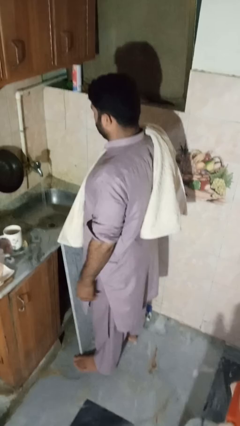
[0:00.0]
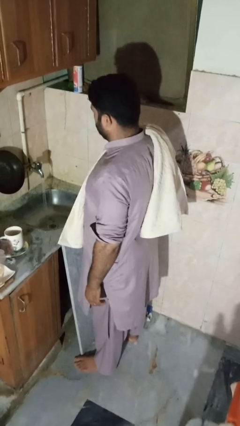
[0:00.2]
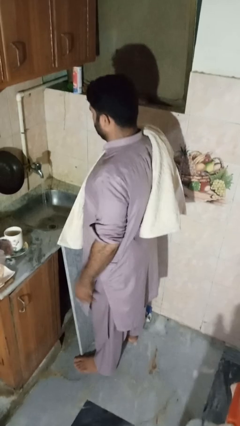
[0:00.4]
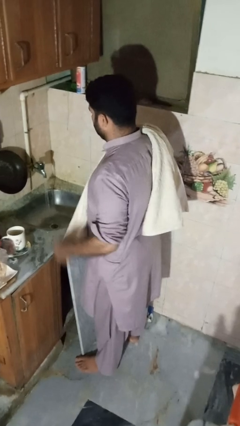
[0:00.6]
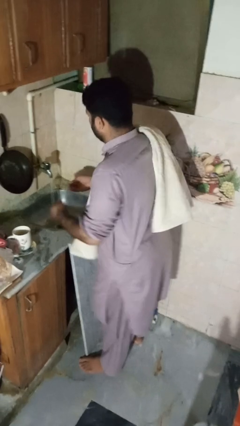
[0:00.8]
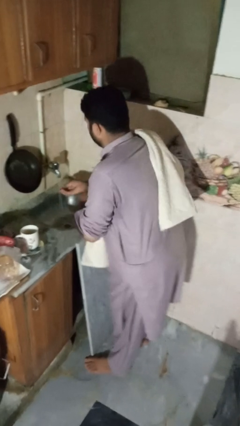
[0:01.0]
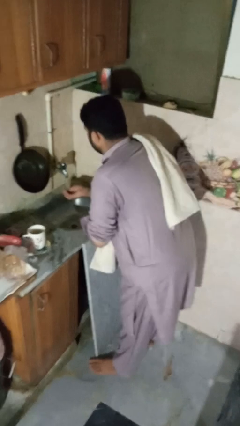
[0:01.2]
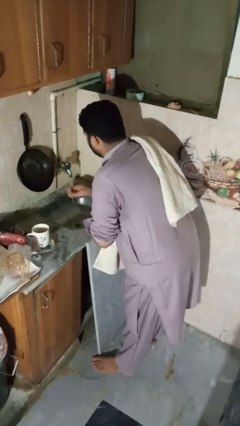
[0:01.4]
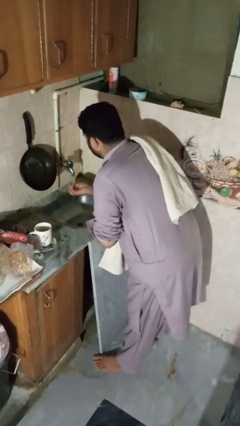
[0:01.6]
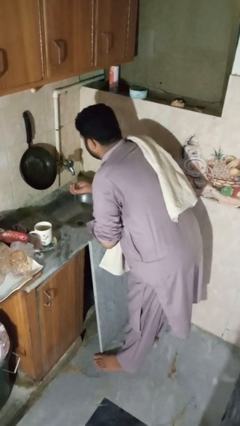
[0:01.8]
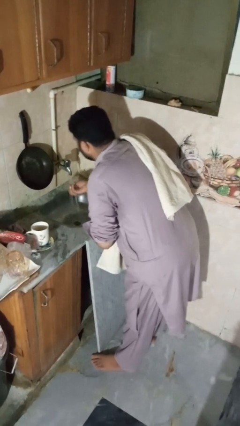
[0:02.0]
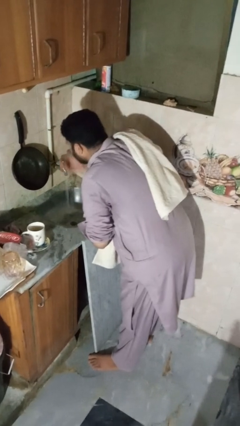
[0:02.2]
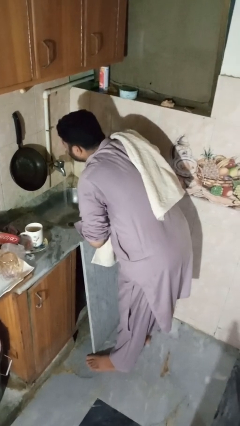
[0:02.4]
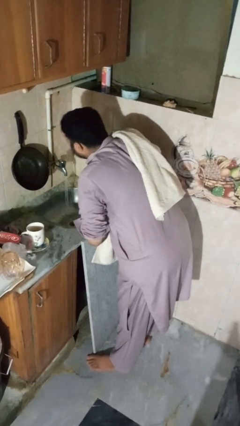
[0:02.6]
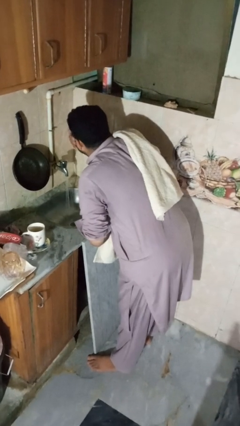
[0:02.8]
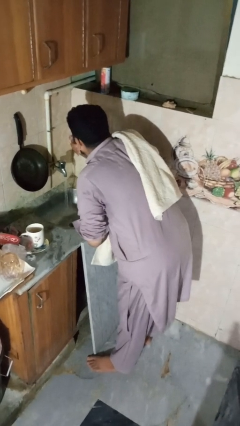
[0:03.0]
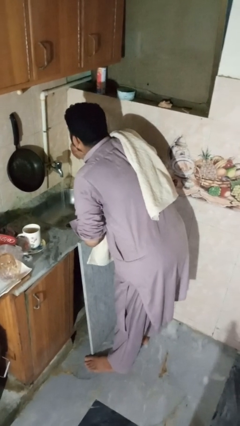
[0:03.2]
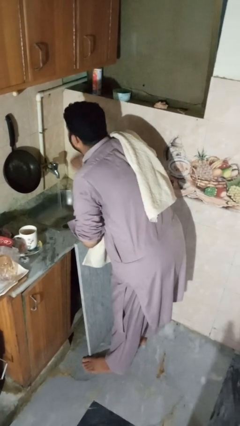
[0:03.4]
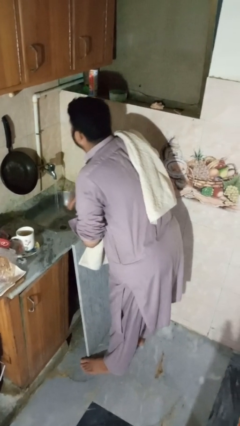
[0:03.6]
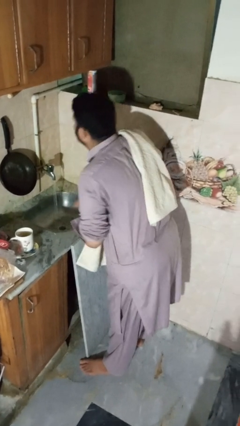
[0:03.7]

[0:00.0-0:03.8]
person washes face

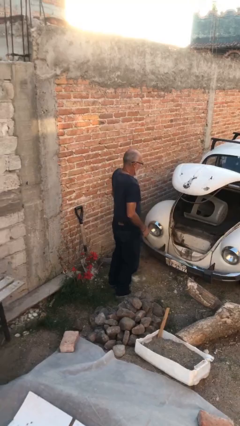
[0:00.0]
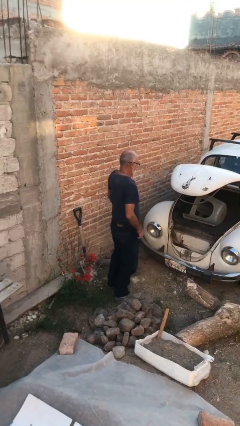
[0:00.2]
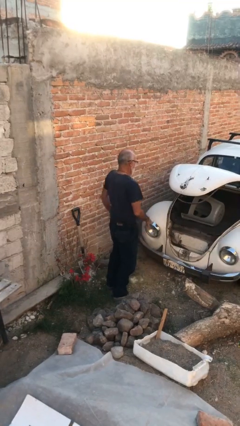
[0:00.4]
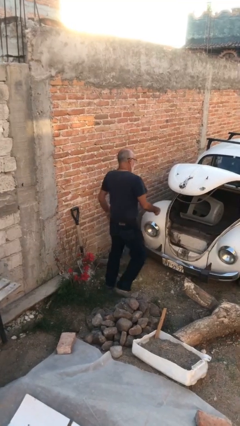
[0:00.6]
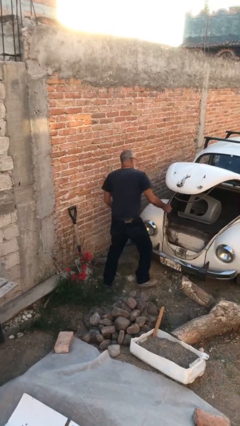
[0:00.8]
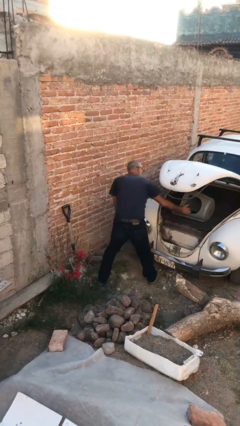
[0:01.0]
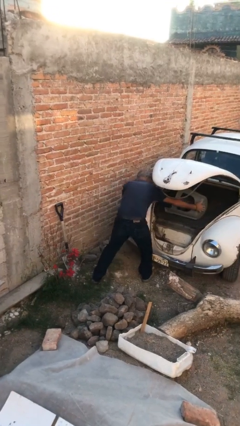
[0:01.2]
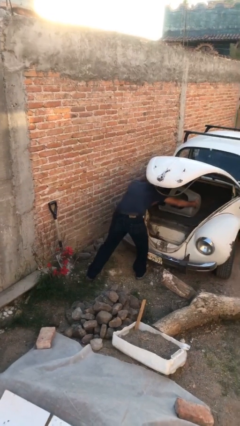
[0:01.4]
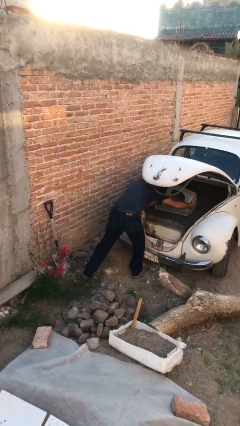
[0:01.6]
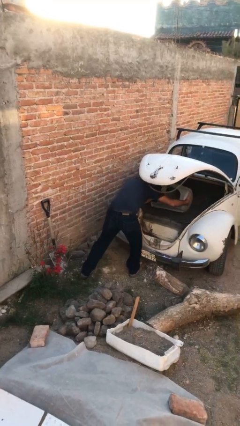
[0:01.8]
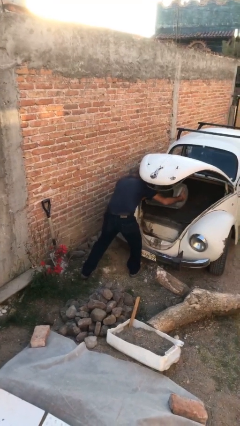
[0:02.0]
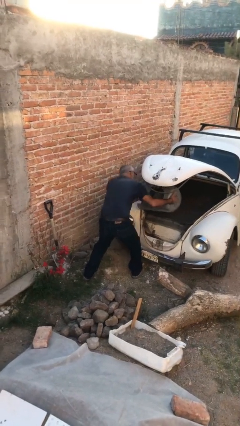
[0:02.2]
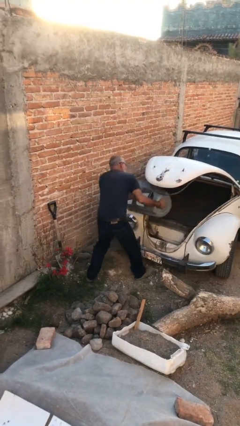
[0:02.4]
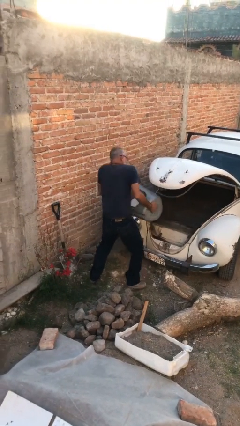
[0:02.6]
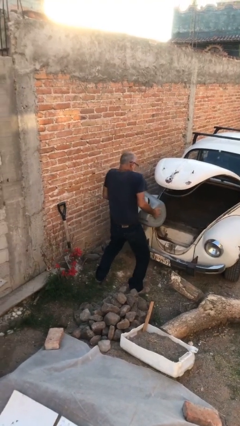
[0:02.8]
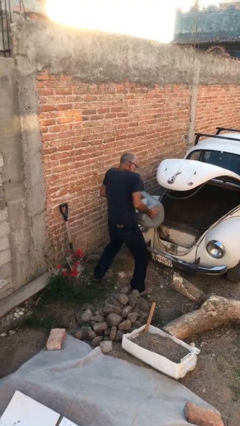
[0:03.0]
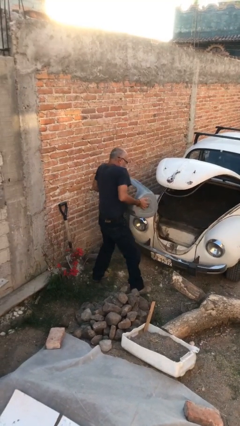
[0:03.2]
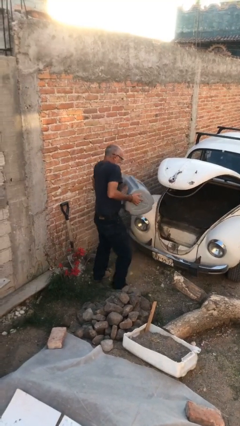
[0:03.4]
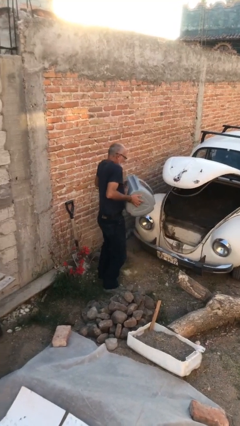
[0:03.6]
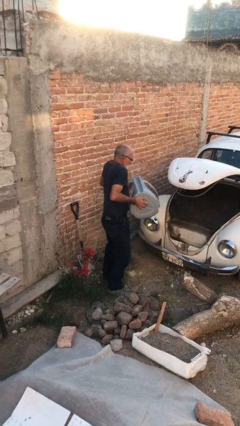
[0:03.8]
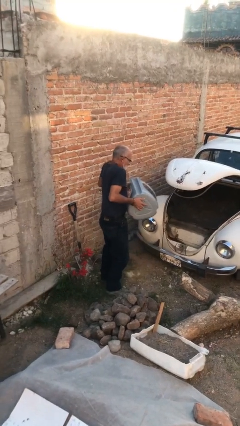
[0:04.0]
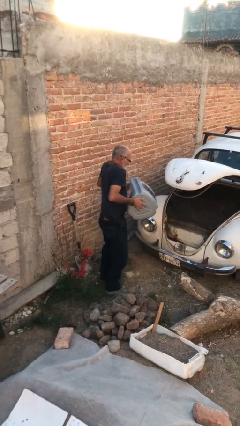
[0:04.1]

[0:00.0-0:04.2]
person unloads car

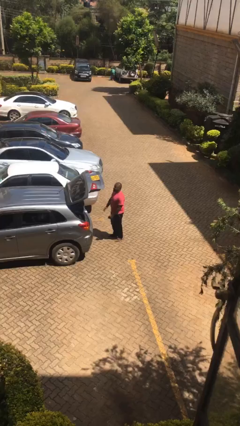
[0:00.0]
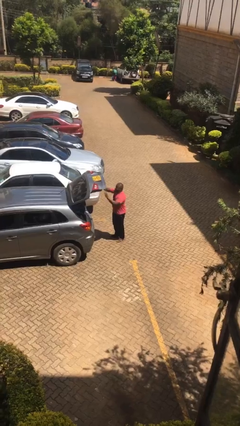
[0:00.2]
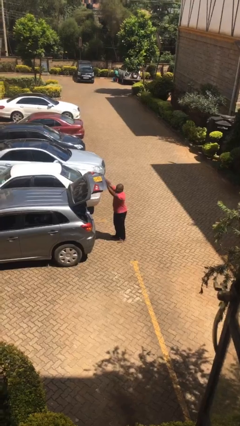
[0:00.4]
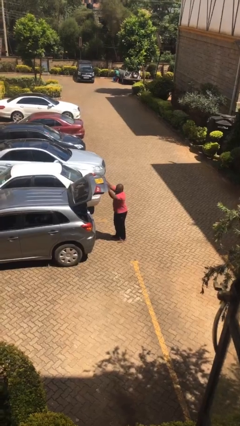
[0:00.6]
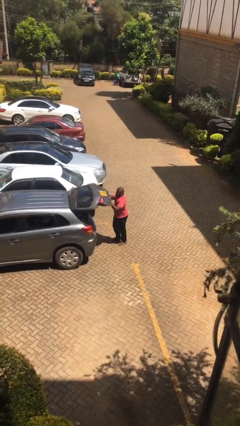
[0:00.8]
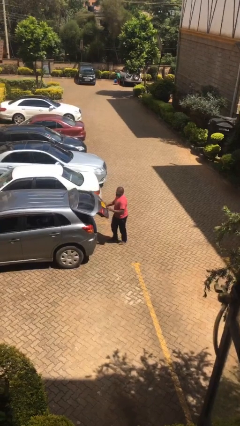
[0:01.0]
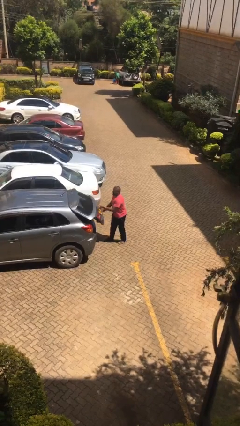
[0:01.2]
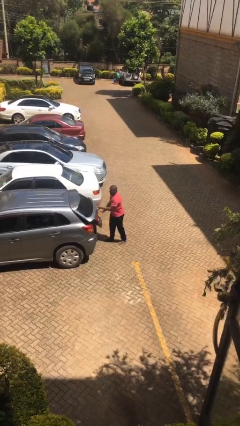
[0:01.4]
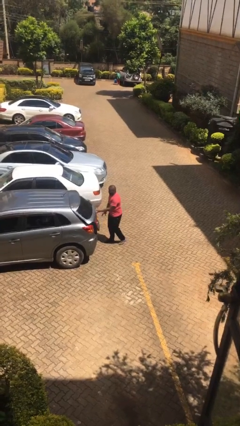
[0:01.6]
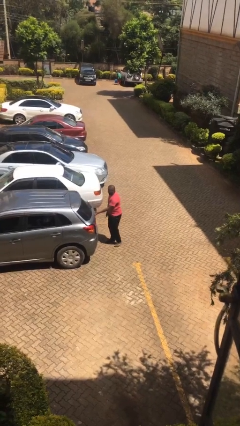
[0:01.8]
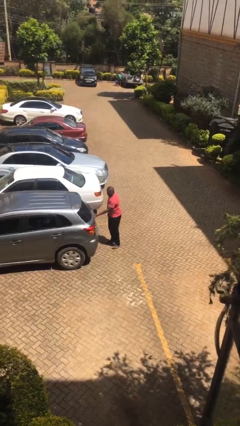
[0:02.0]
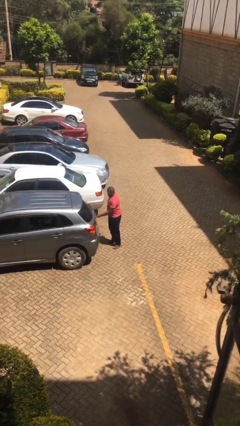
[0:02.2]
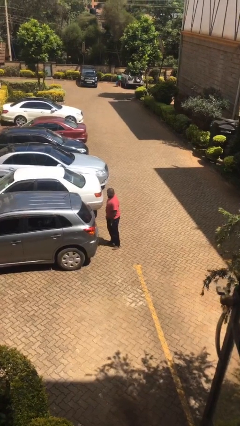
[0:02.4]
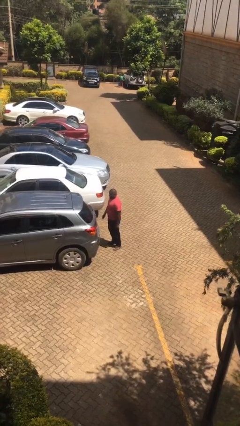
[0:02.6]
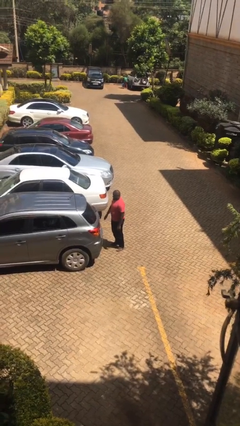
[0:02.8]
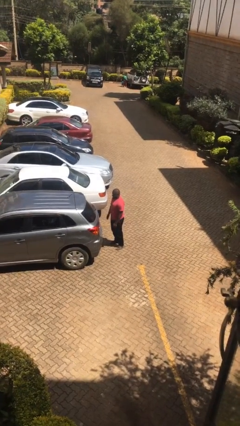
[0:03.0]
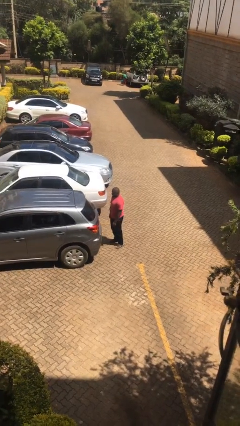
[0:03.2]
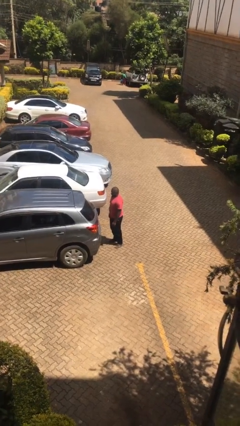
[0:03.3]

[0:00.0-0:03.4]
person closes car trunk

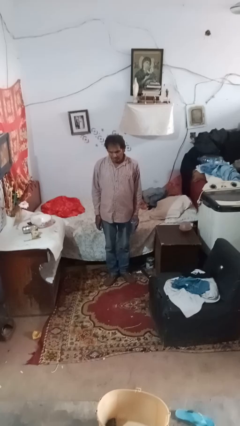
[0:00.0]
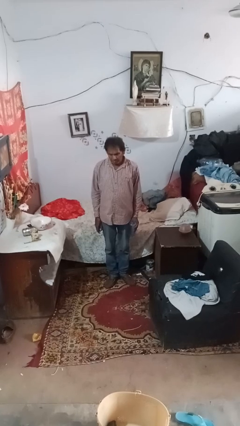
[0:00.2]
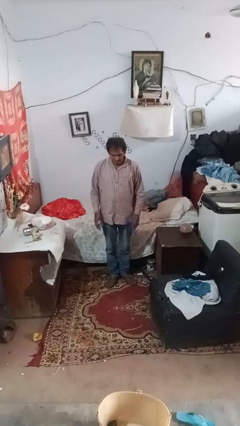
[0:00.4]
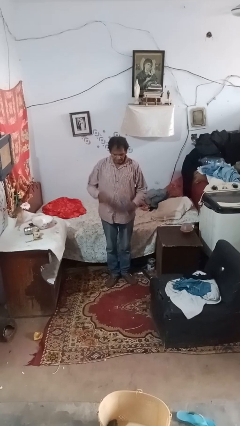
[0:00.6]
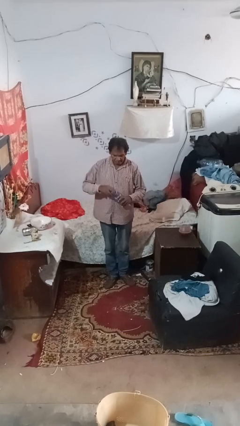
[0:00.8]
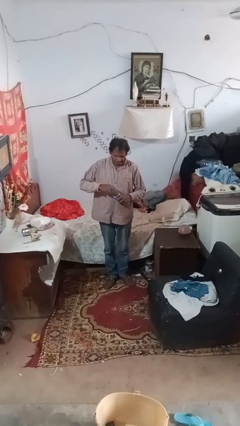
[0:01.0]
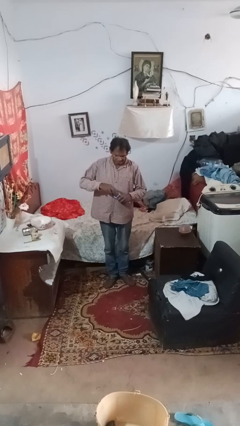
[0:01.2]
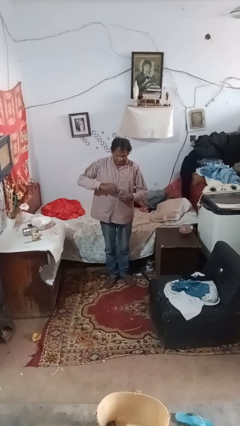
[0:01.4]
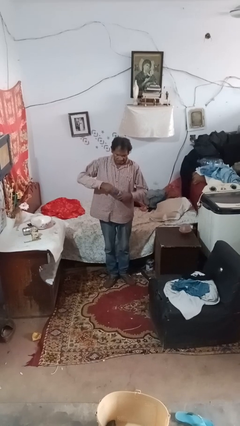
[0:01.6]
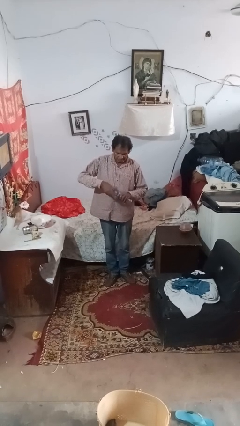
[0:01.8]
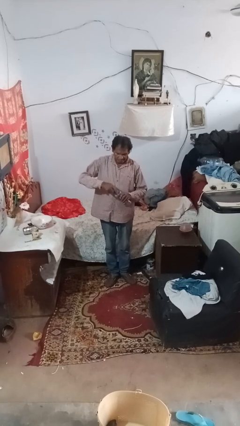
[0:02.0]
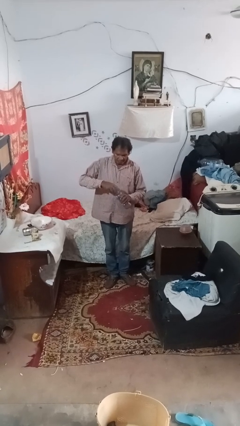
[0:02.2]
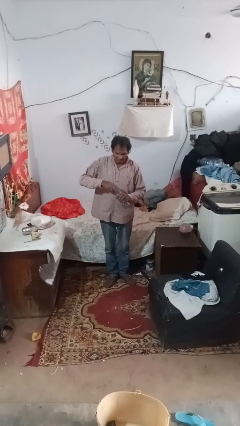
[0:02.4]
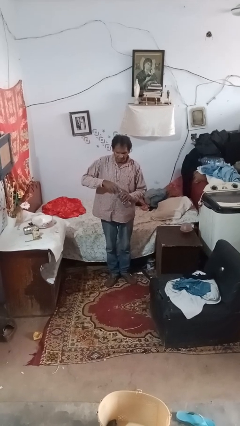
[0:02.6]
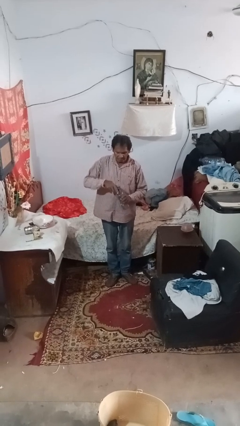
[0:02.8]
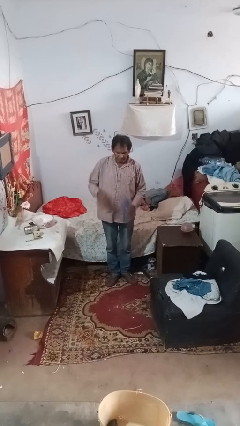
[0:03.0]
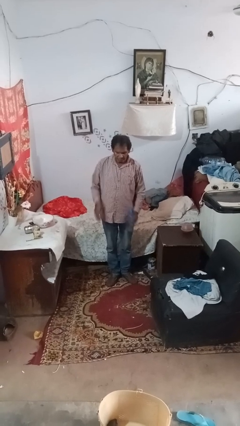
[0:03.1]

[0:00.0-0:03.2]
person screws lid to bottle

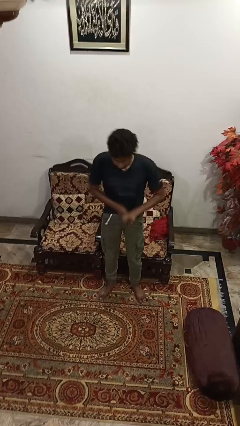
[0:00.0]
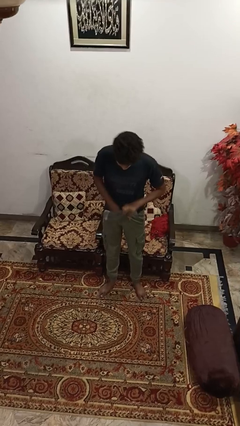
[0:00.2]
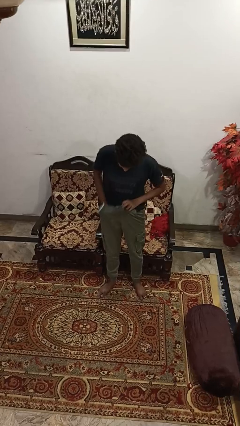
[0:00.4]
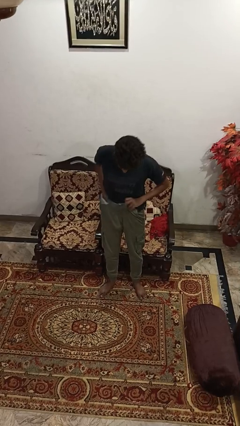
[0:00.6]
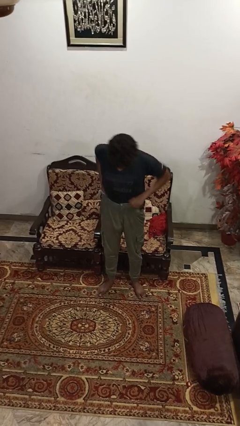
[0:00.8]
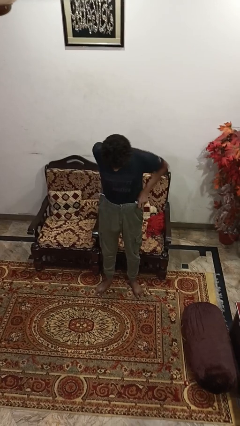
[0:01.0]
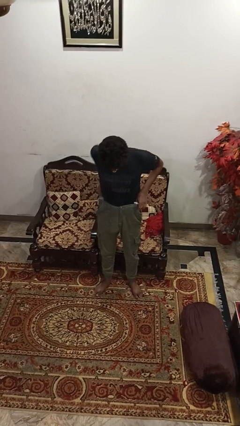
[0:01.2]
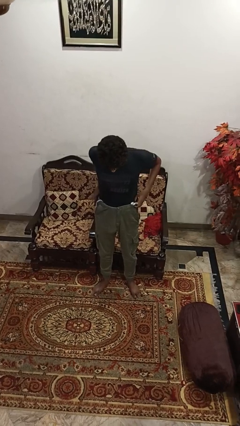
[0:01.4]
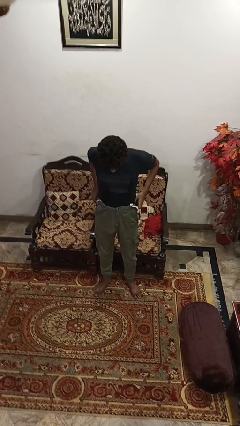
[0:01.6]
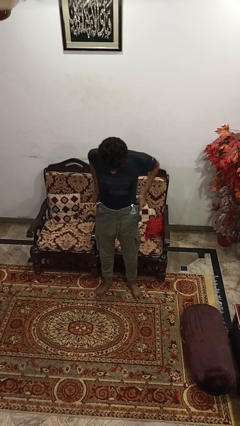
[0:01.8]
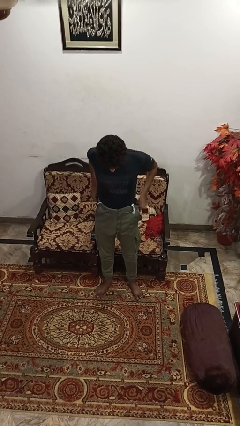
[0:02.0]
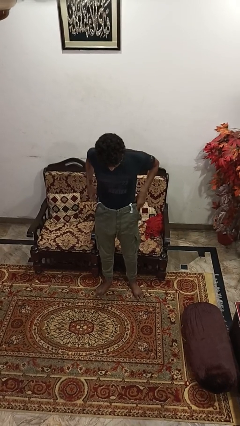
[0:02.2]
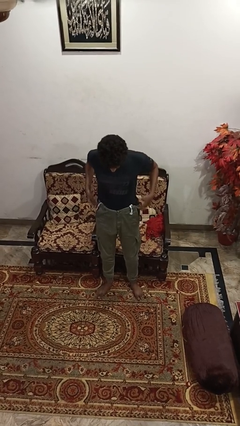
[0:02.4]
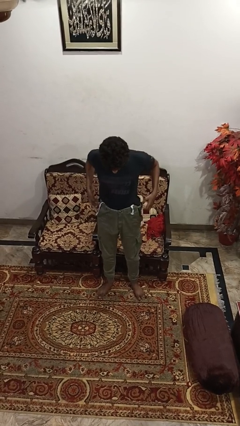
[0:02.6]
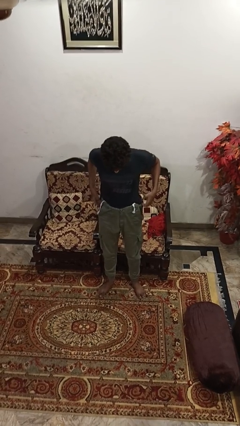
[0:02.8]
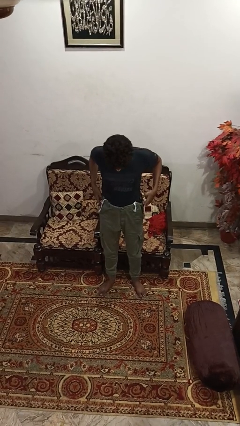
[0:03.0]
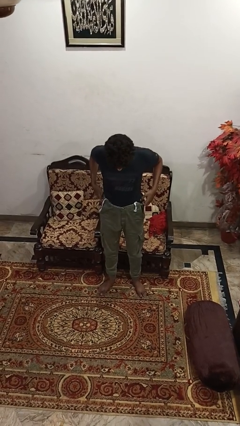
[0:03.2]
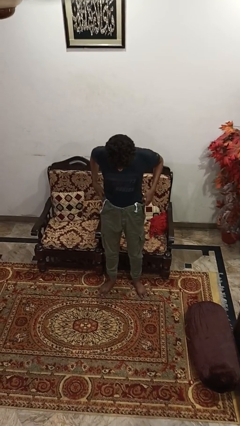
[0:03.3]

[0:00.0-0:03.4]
person tucks in shirt
